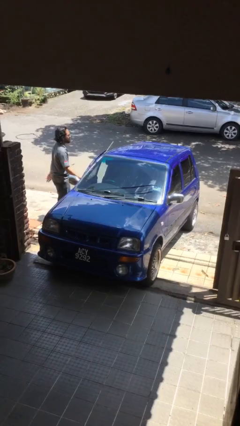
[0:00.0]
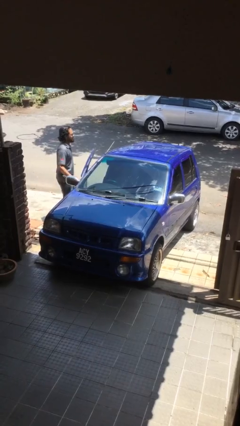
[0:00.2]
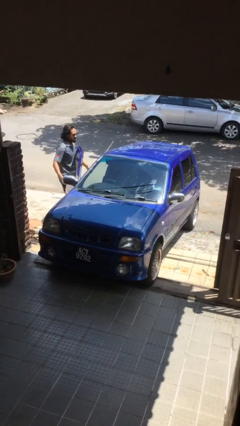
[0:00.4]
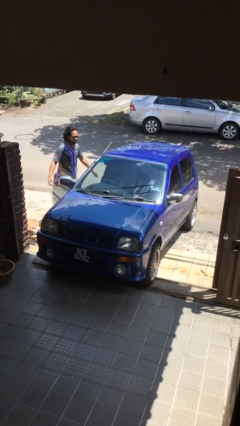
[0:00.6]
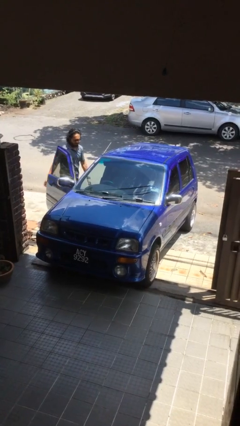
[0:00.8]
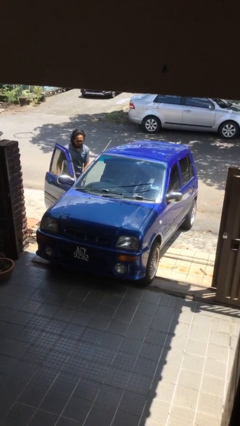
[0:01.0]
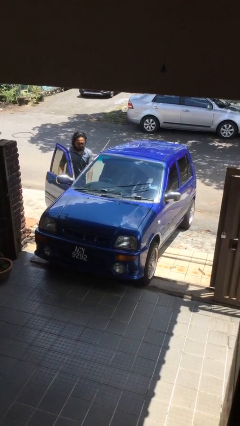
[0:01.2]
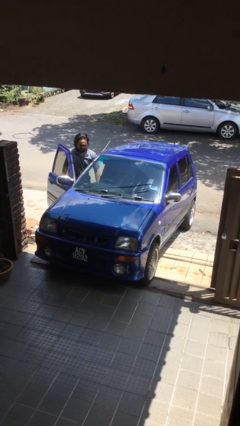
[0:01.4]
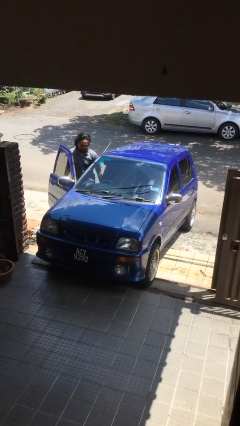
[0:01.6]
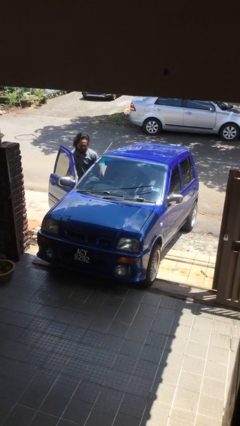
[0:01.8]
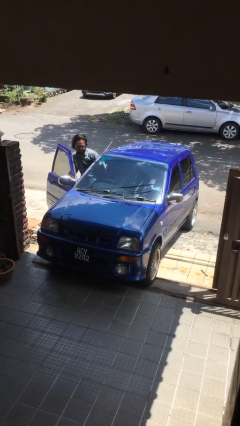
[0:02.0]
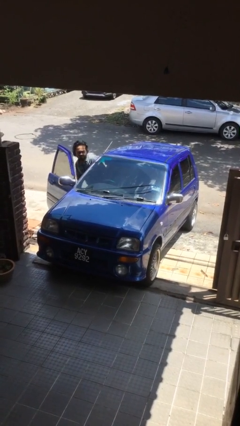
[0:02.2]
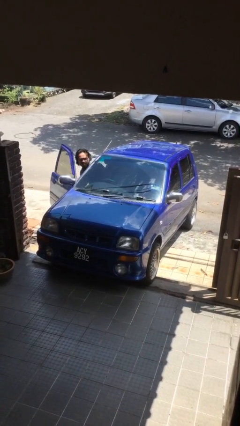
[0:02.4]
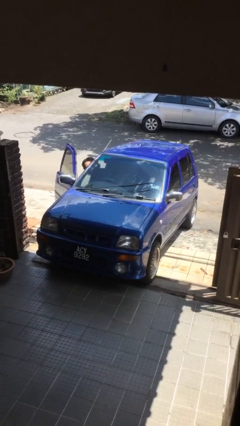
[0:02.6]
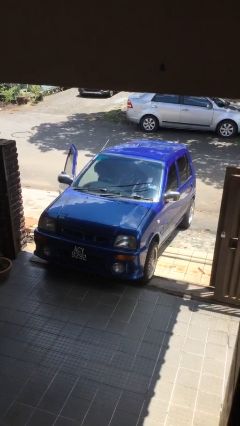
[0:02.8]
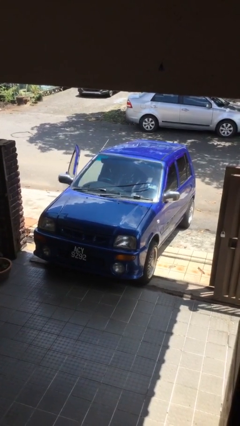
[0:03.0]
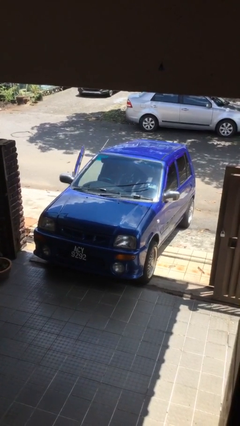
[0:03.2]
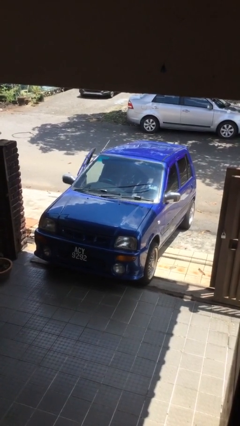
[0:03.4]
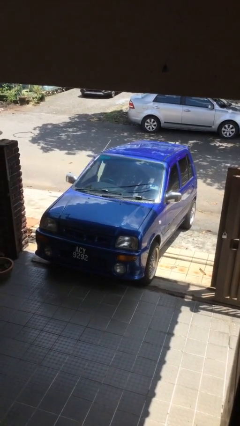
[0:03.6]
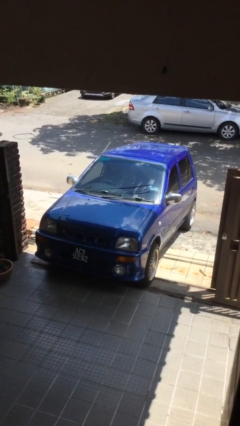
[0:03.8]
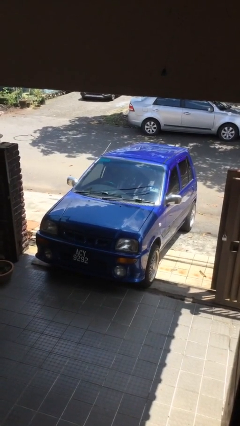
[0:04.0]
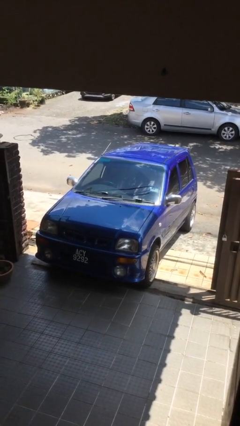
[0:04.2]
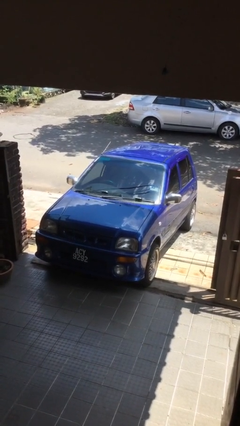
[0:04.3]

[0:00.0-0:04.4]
car picks up person

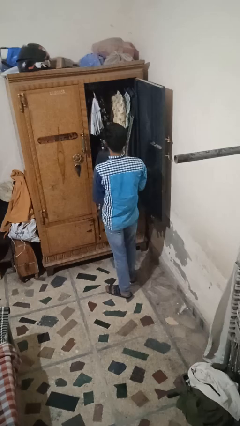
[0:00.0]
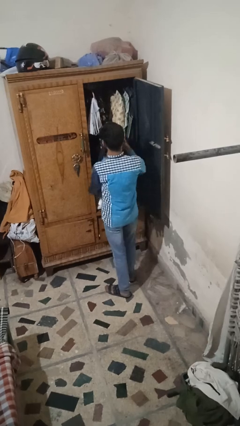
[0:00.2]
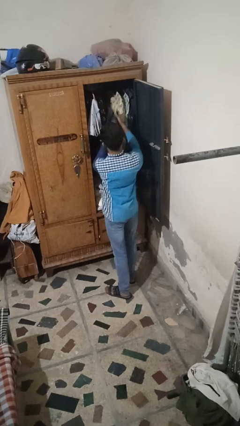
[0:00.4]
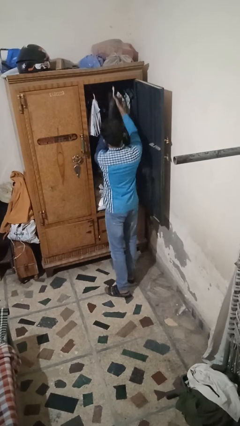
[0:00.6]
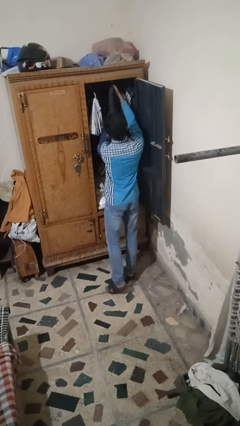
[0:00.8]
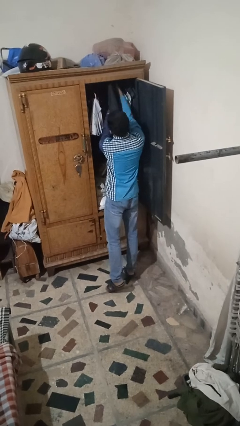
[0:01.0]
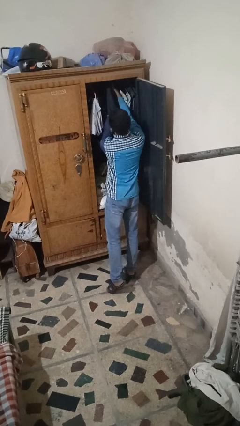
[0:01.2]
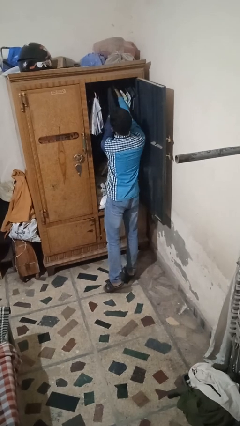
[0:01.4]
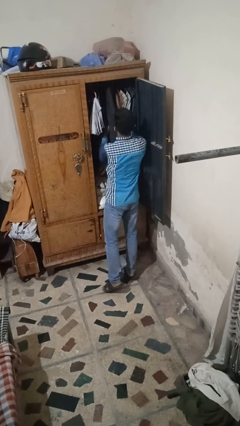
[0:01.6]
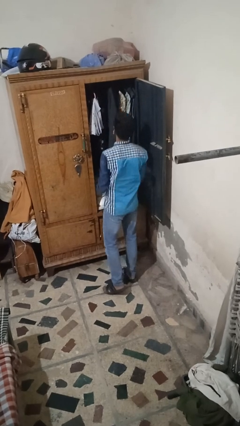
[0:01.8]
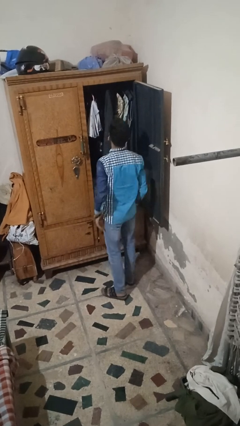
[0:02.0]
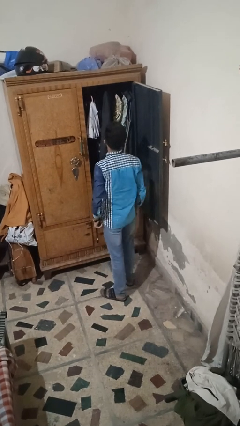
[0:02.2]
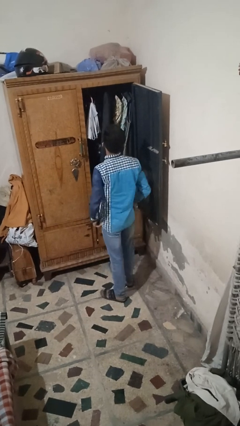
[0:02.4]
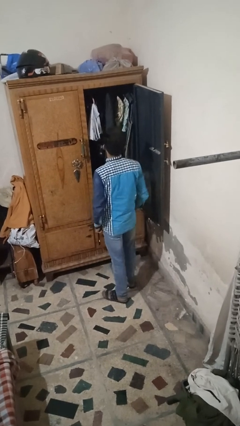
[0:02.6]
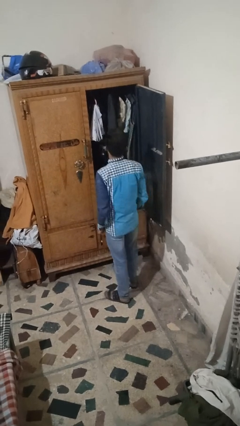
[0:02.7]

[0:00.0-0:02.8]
person puts clothes into closet

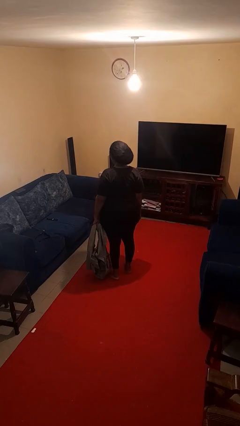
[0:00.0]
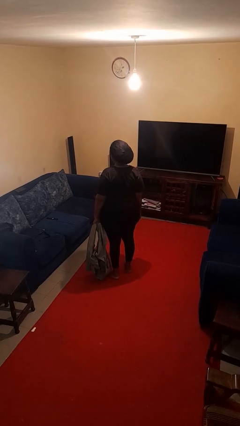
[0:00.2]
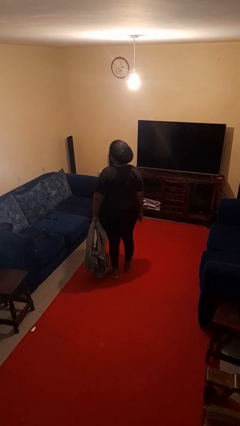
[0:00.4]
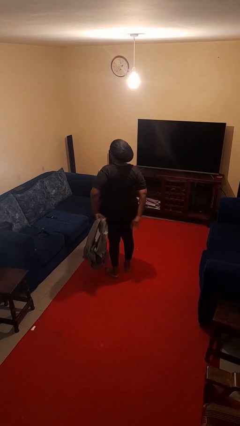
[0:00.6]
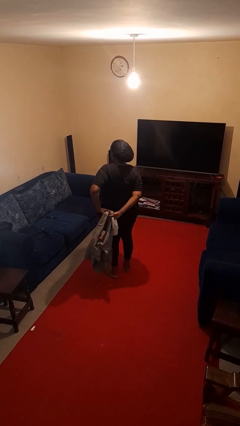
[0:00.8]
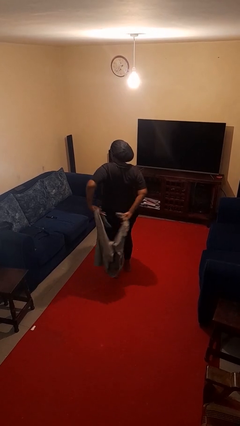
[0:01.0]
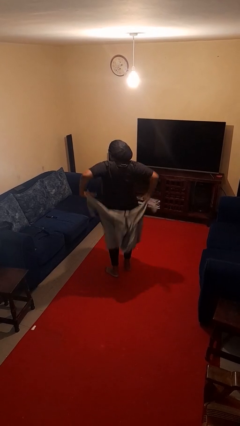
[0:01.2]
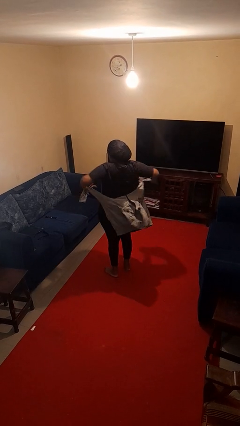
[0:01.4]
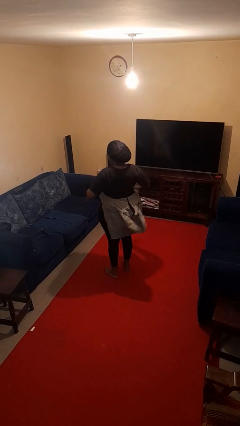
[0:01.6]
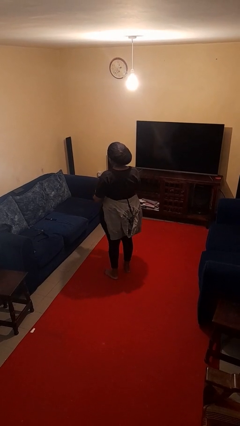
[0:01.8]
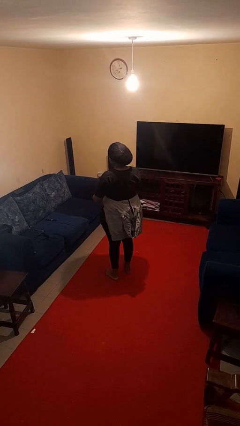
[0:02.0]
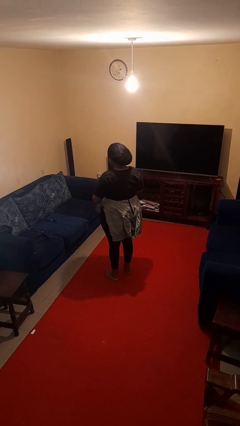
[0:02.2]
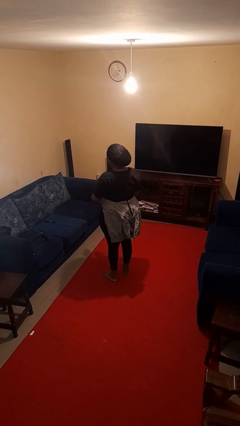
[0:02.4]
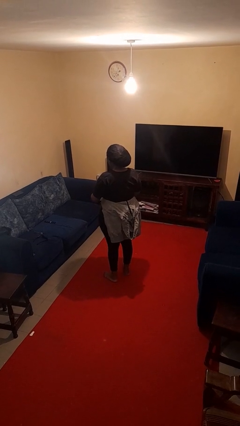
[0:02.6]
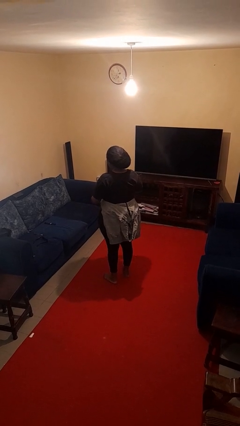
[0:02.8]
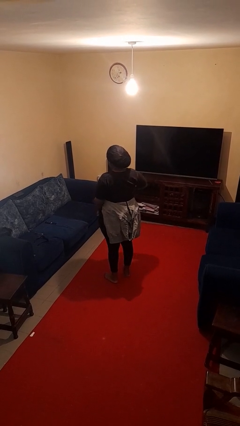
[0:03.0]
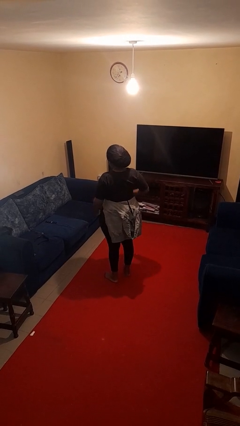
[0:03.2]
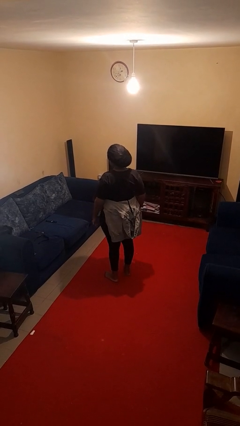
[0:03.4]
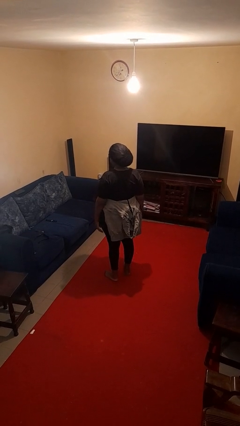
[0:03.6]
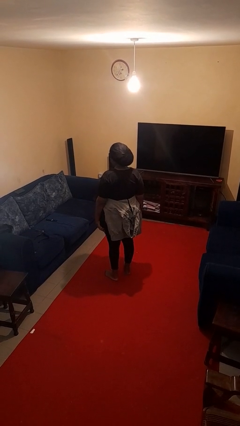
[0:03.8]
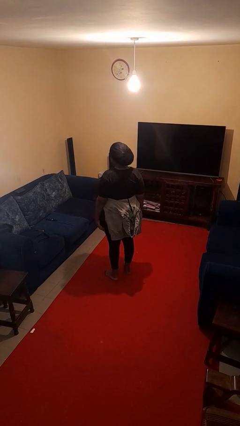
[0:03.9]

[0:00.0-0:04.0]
person ties jacket around waist

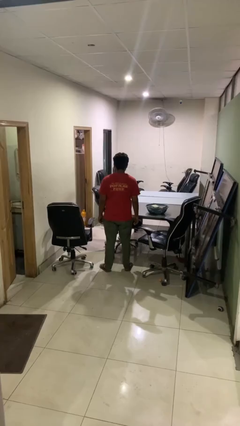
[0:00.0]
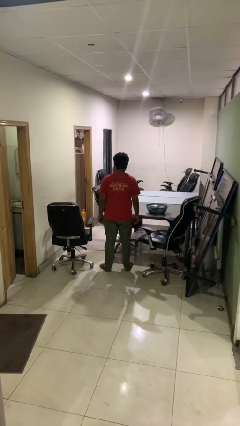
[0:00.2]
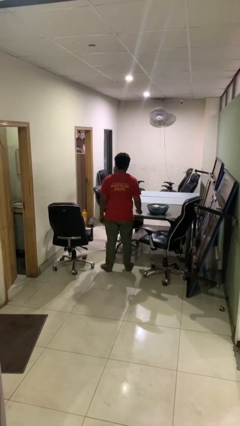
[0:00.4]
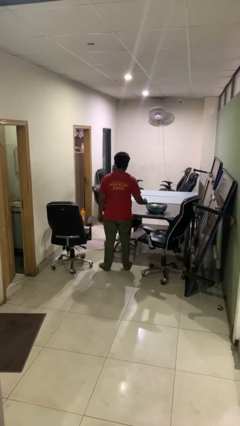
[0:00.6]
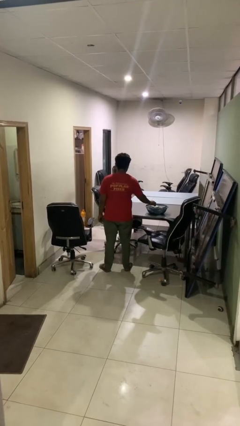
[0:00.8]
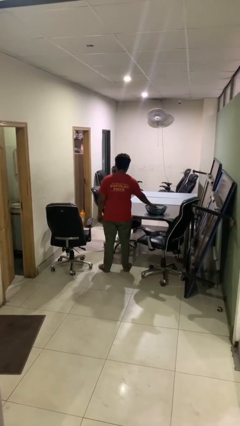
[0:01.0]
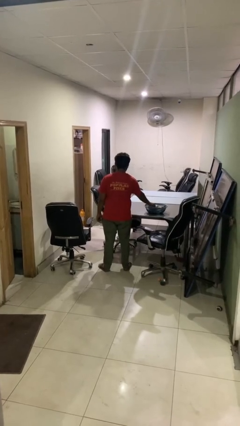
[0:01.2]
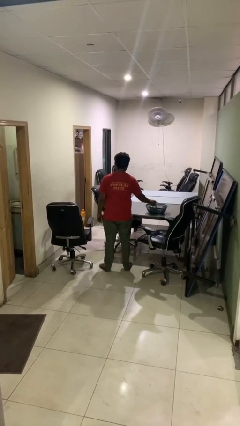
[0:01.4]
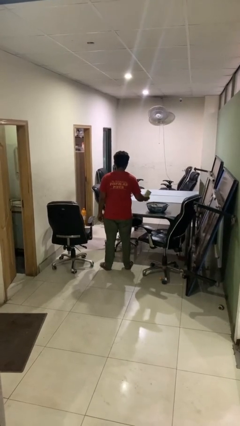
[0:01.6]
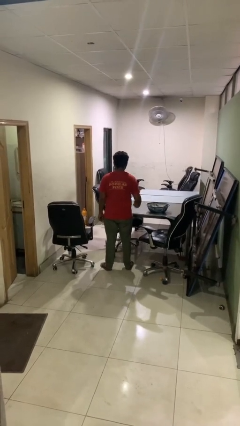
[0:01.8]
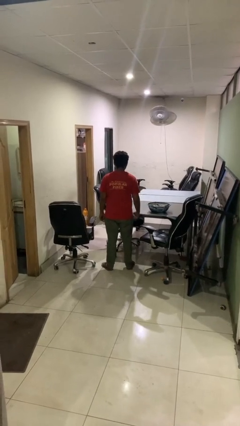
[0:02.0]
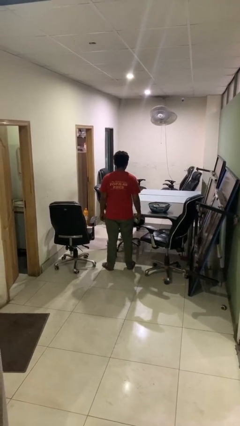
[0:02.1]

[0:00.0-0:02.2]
person takes object from basket

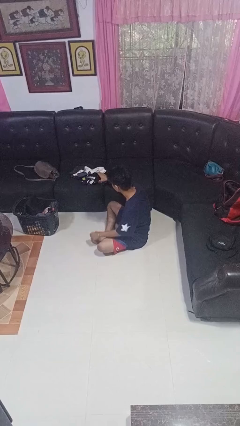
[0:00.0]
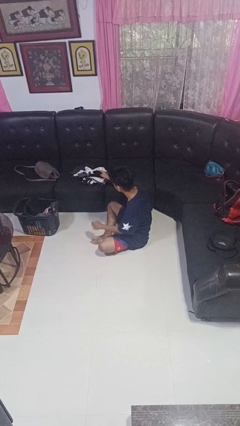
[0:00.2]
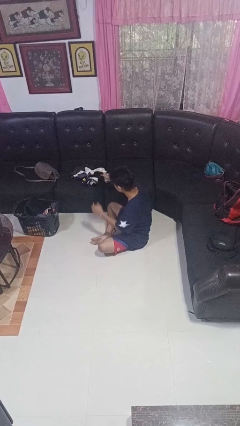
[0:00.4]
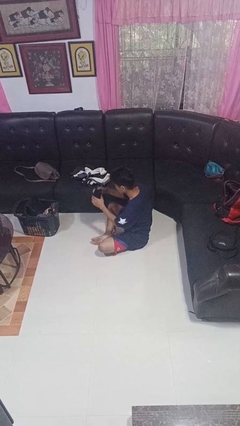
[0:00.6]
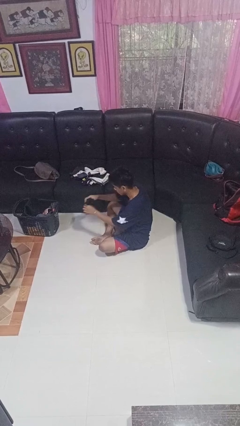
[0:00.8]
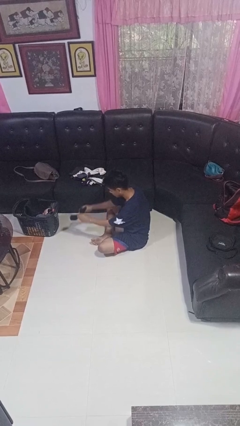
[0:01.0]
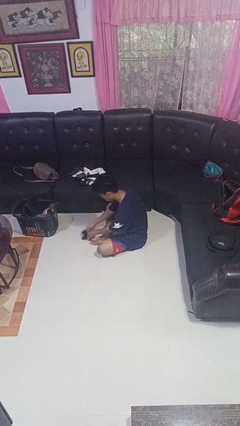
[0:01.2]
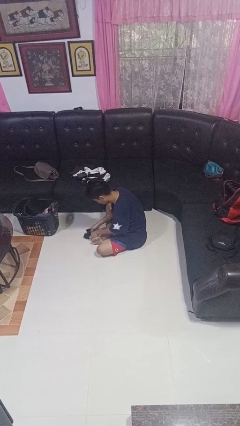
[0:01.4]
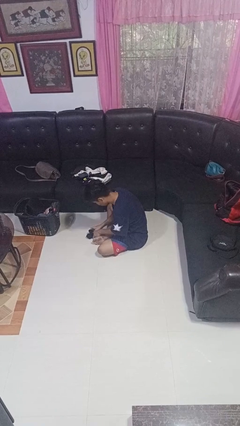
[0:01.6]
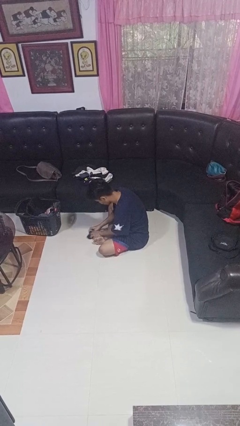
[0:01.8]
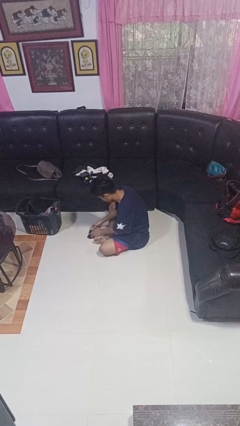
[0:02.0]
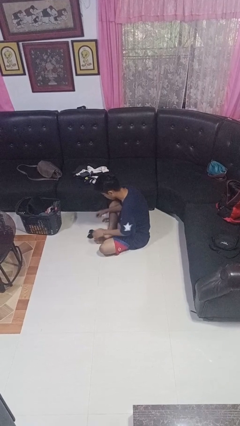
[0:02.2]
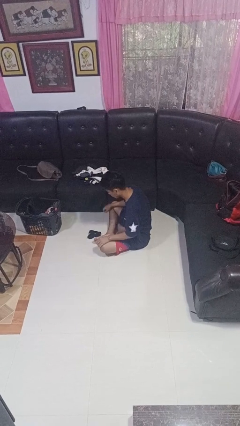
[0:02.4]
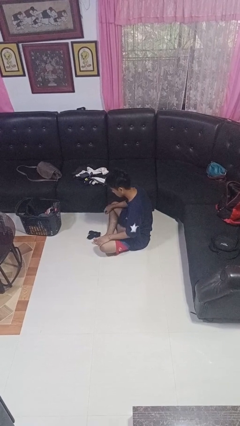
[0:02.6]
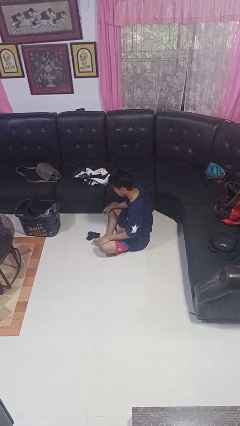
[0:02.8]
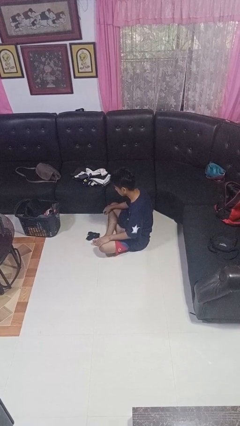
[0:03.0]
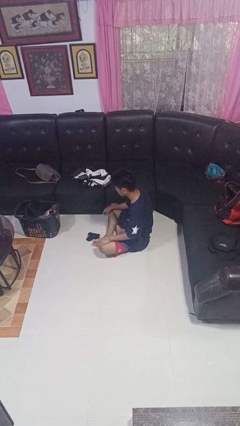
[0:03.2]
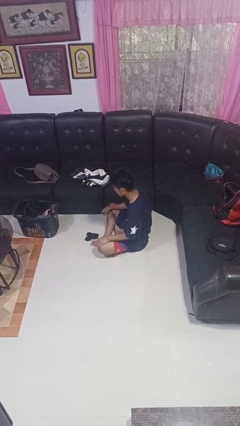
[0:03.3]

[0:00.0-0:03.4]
person folds socks

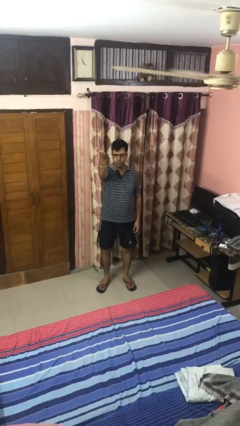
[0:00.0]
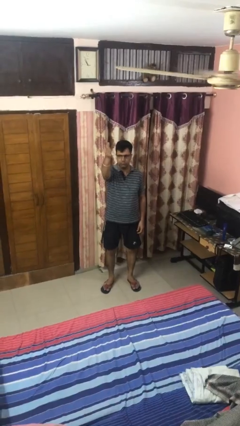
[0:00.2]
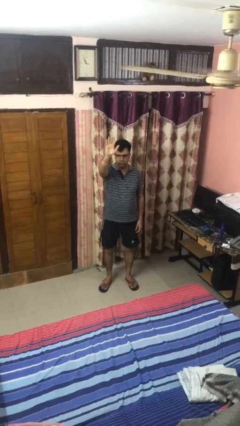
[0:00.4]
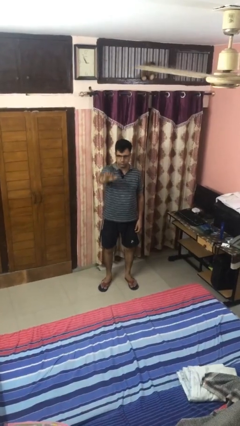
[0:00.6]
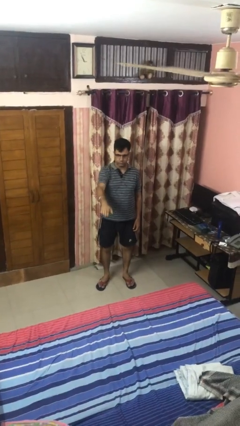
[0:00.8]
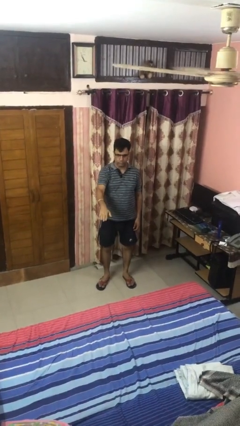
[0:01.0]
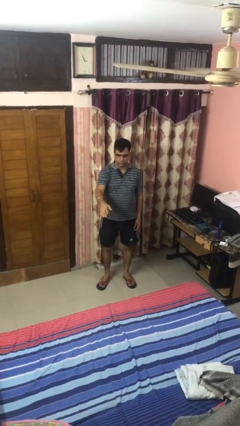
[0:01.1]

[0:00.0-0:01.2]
person gestures swipe down
